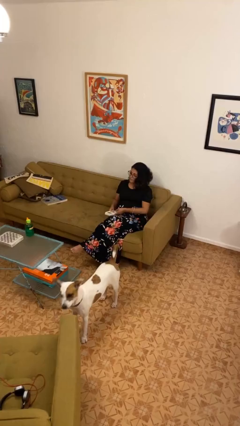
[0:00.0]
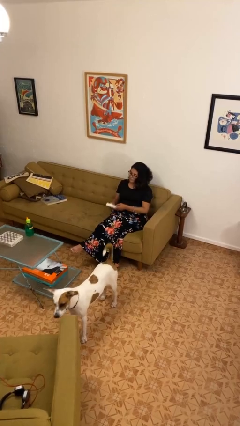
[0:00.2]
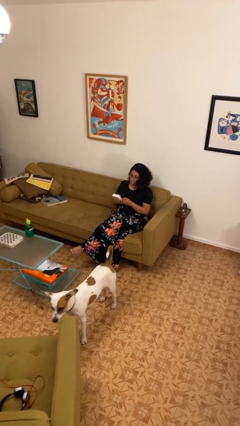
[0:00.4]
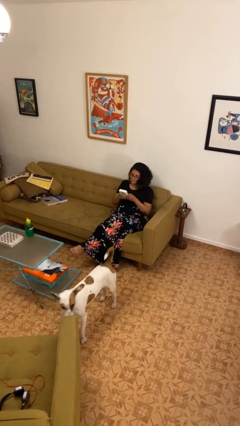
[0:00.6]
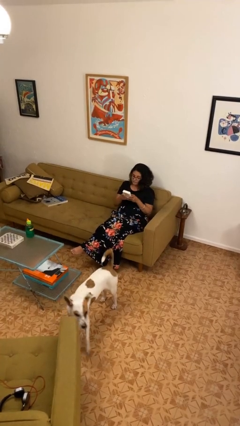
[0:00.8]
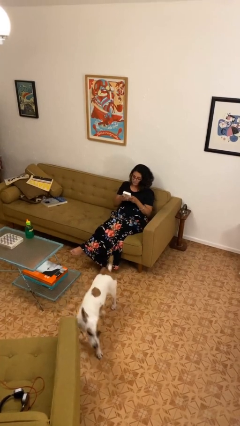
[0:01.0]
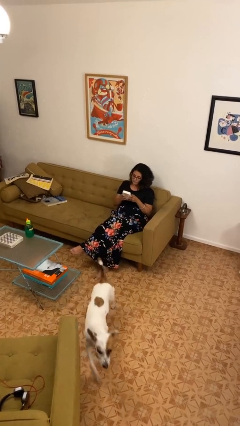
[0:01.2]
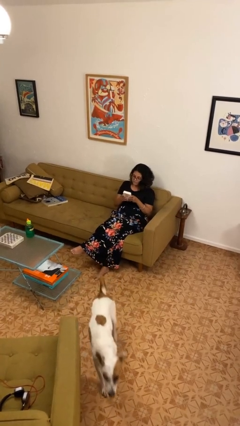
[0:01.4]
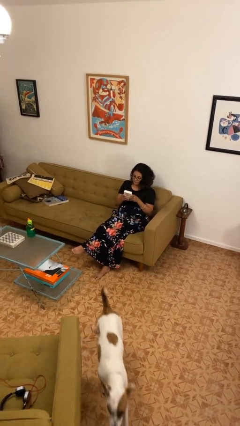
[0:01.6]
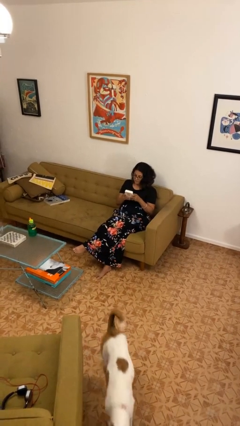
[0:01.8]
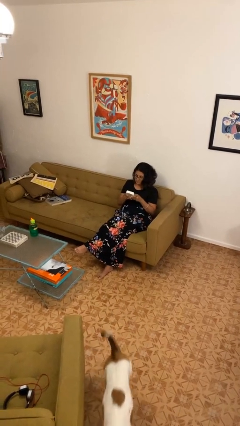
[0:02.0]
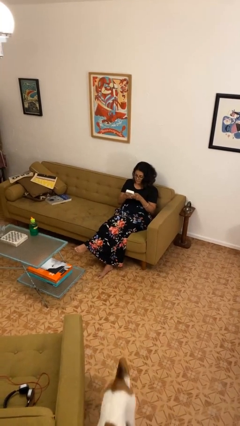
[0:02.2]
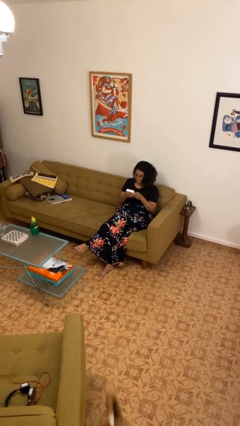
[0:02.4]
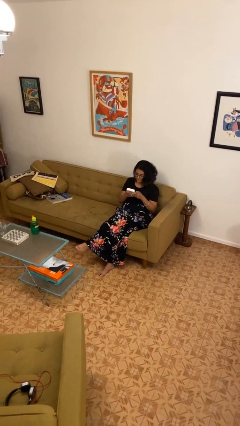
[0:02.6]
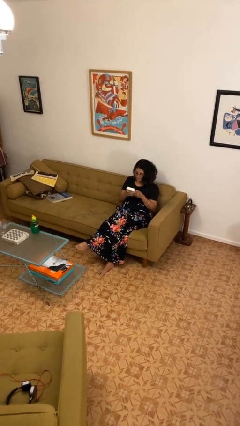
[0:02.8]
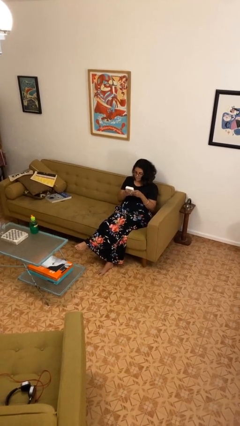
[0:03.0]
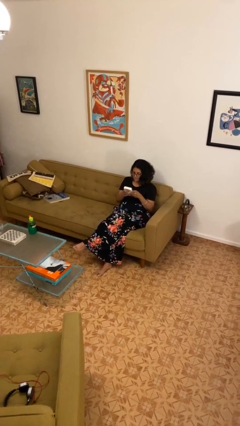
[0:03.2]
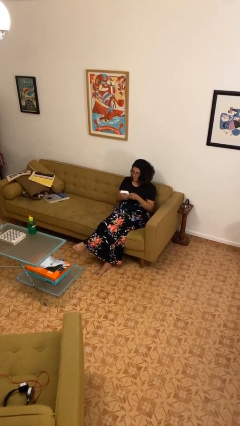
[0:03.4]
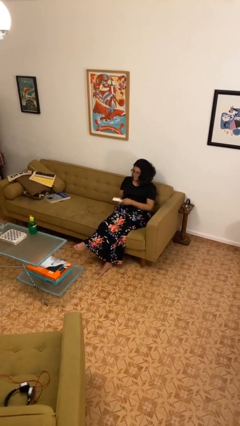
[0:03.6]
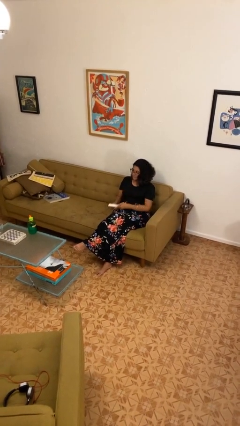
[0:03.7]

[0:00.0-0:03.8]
person interacts with handheld game

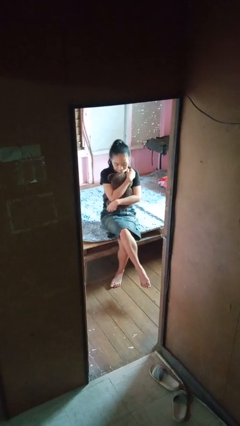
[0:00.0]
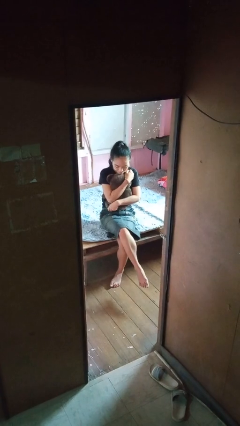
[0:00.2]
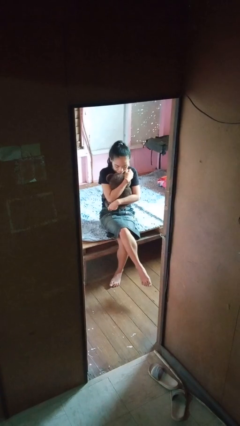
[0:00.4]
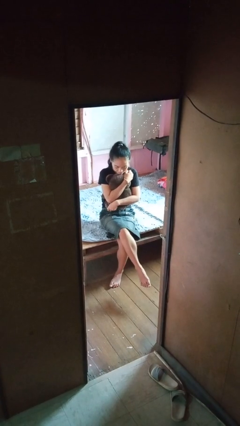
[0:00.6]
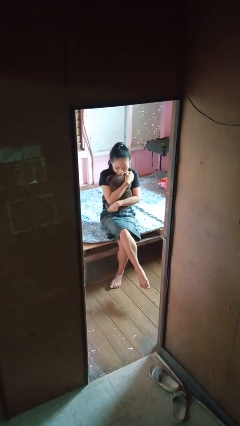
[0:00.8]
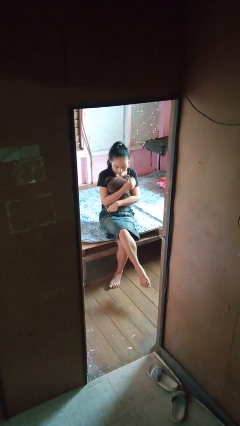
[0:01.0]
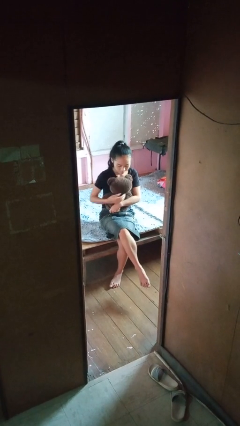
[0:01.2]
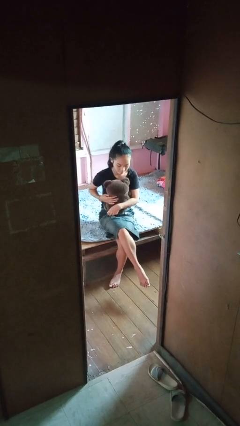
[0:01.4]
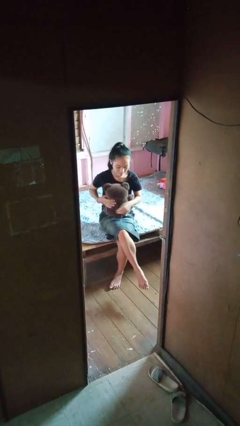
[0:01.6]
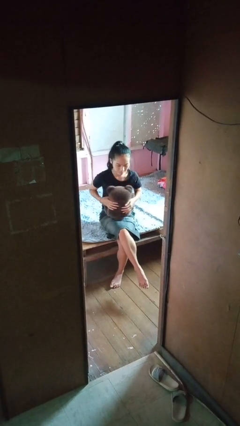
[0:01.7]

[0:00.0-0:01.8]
person hugs stuffed animal

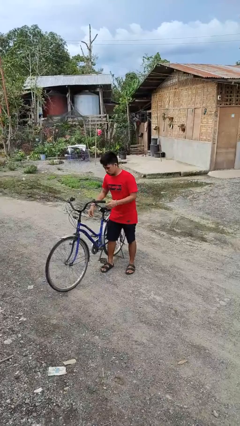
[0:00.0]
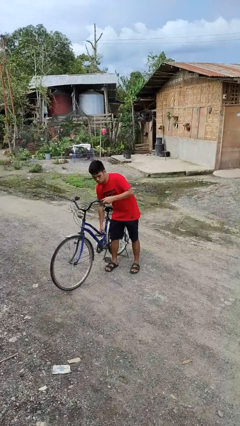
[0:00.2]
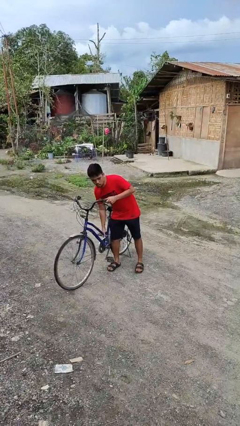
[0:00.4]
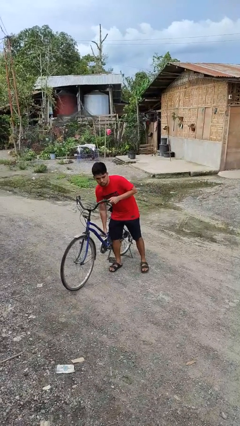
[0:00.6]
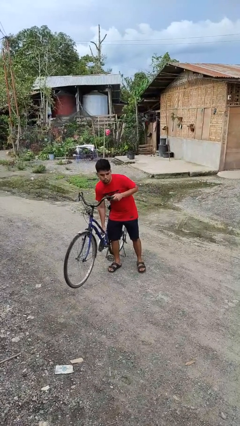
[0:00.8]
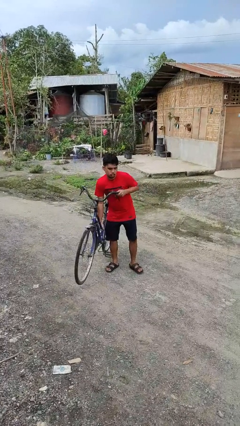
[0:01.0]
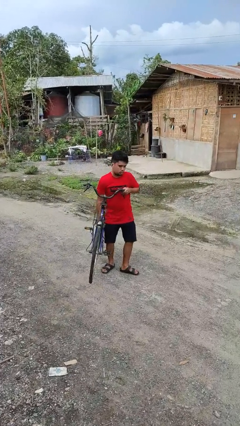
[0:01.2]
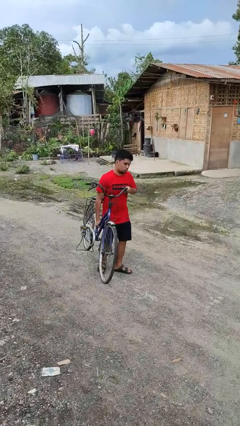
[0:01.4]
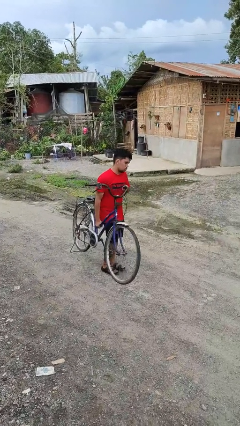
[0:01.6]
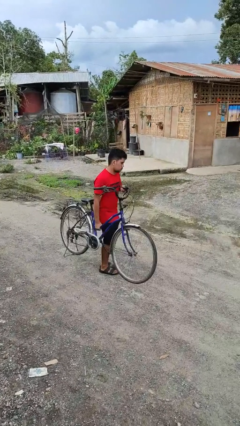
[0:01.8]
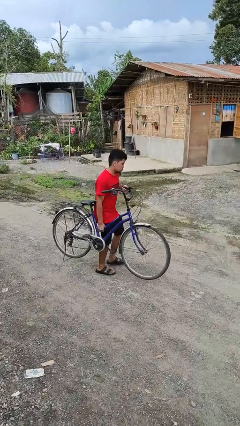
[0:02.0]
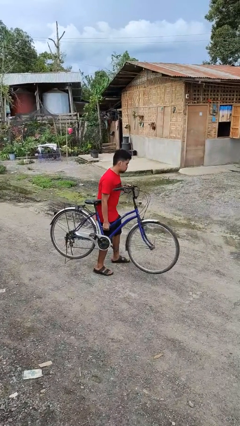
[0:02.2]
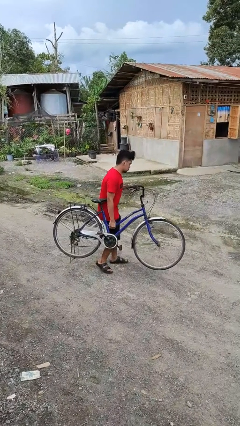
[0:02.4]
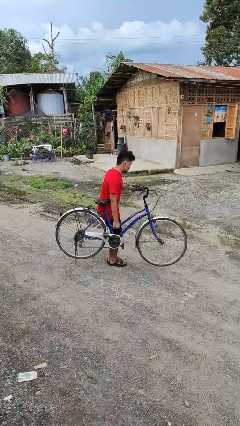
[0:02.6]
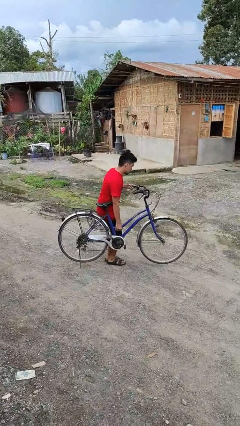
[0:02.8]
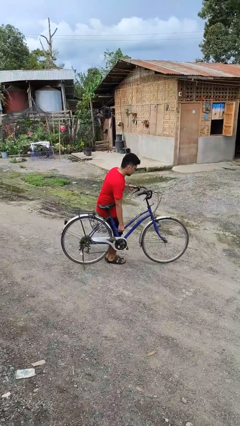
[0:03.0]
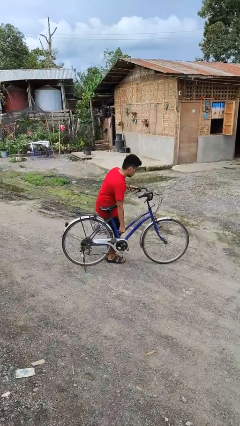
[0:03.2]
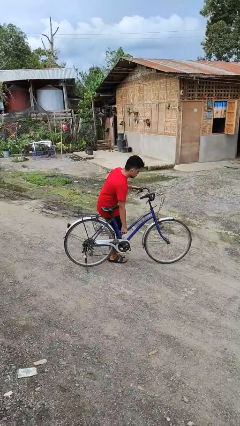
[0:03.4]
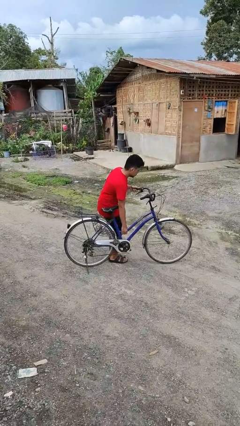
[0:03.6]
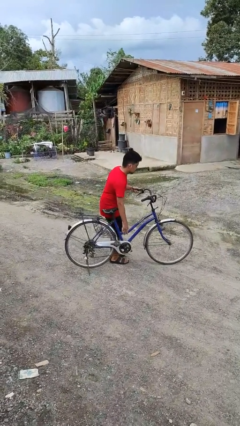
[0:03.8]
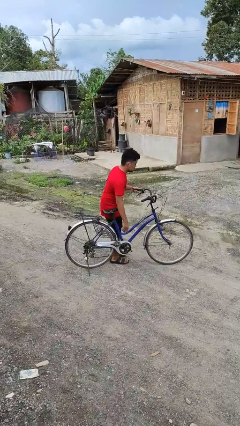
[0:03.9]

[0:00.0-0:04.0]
person carries bicycle

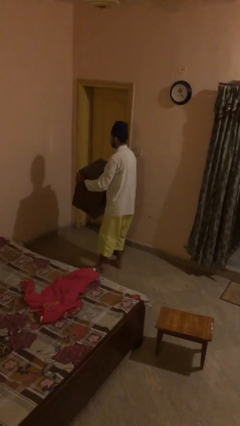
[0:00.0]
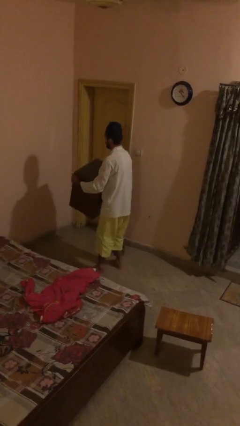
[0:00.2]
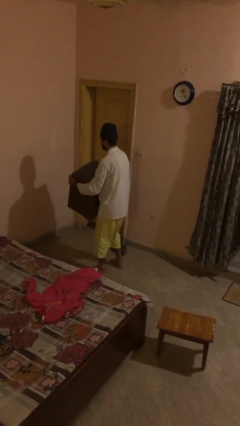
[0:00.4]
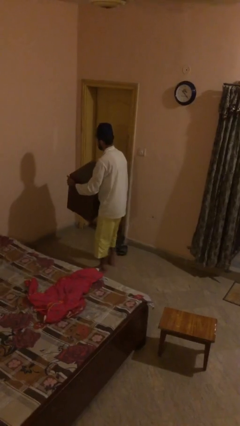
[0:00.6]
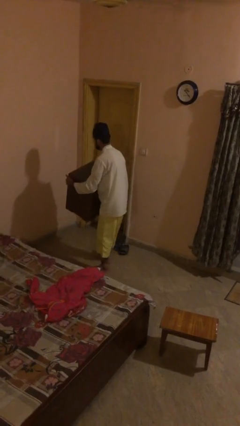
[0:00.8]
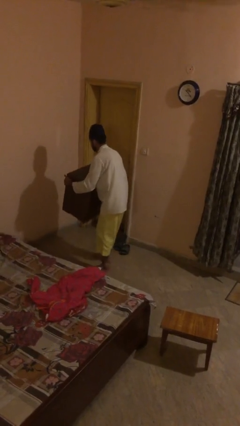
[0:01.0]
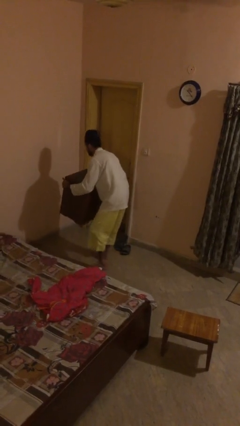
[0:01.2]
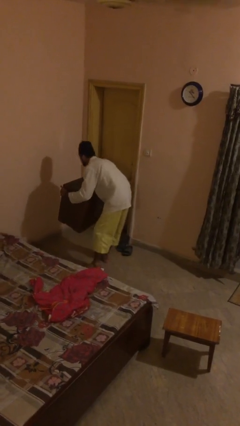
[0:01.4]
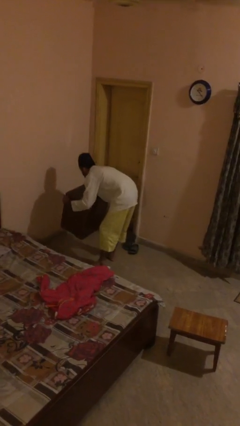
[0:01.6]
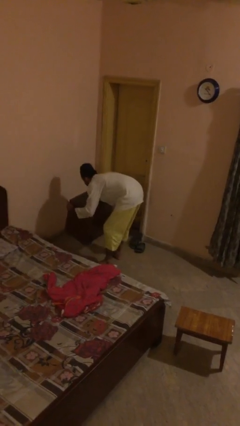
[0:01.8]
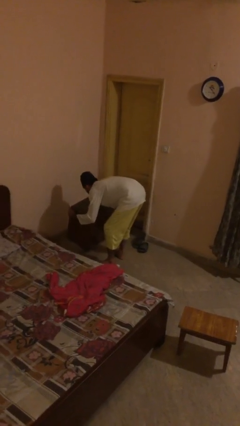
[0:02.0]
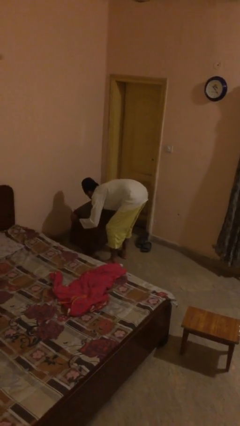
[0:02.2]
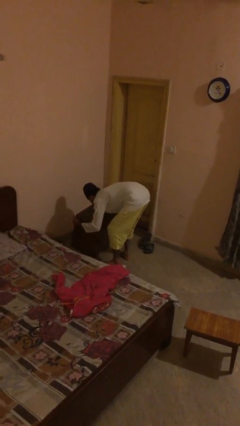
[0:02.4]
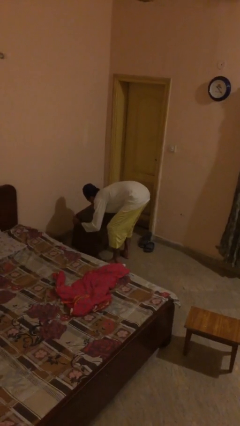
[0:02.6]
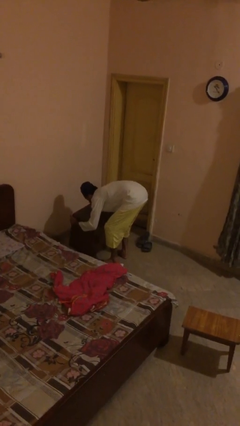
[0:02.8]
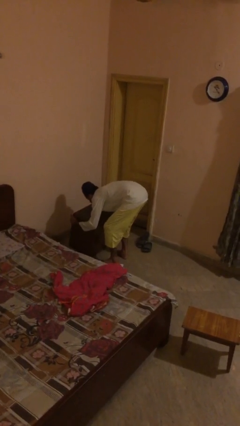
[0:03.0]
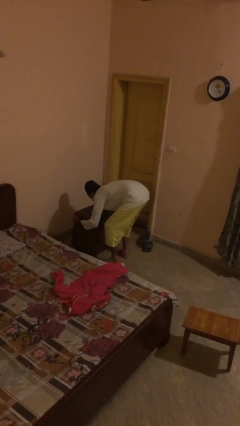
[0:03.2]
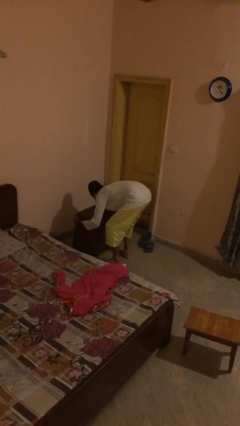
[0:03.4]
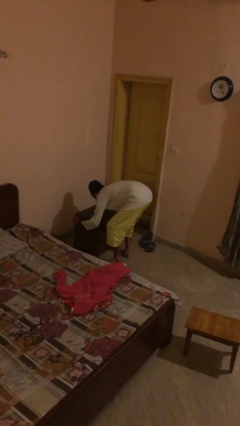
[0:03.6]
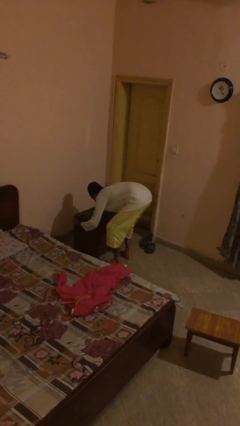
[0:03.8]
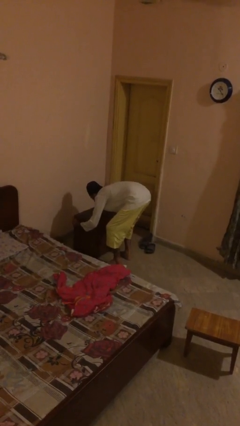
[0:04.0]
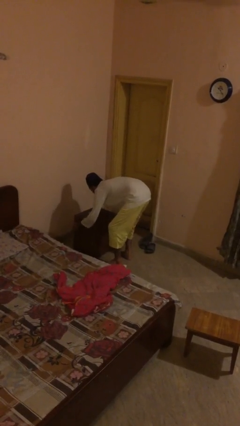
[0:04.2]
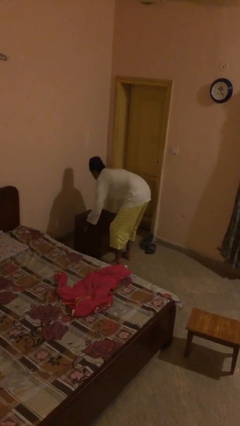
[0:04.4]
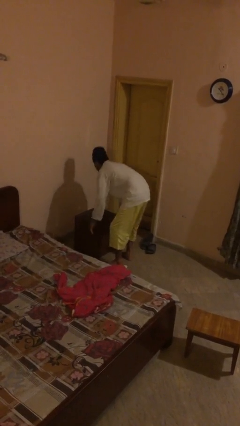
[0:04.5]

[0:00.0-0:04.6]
person puts down object on floor

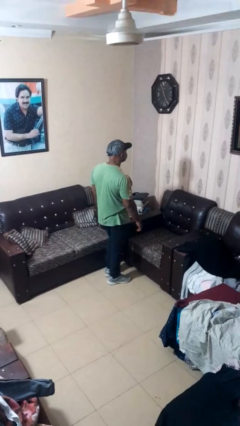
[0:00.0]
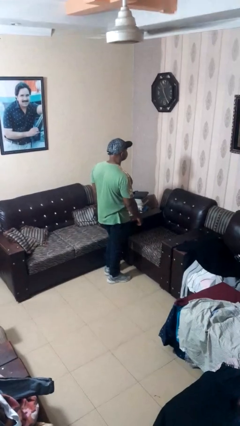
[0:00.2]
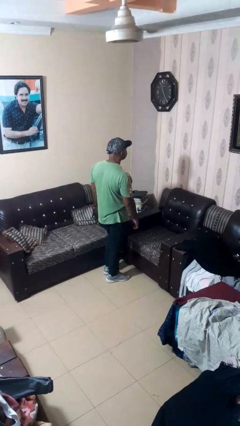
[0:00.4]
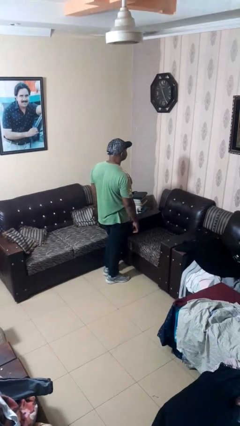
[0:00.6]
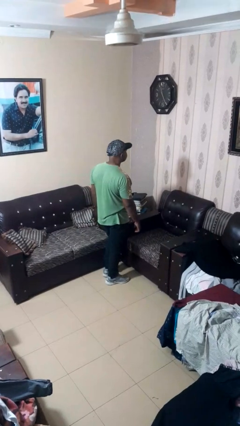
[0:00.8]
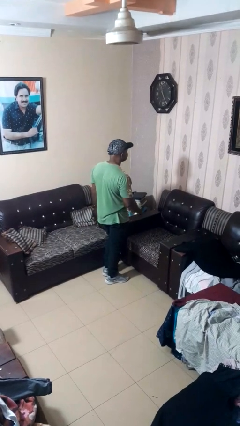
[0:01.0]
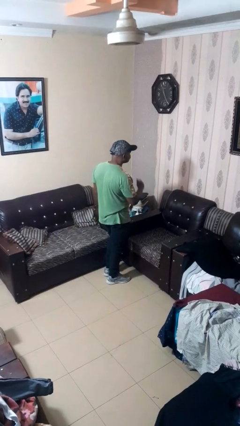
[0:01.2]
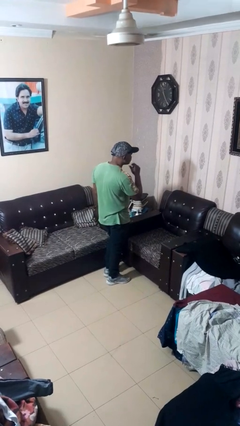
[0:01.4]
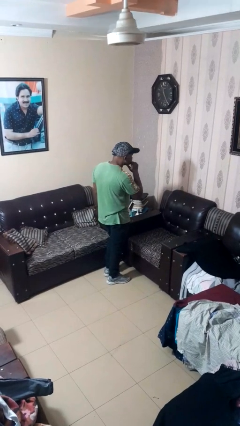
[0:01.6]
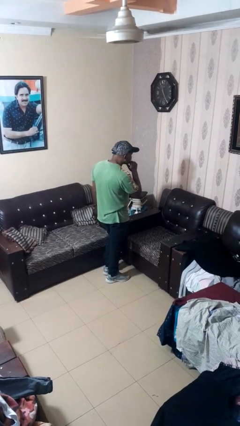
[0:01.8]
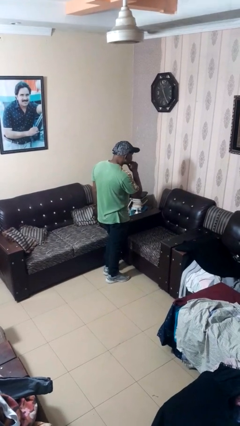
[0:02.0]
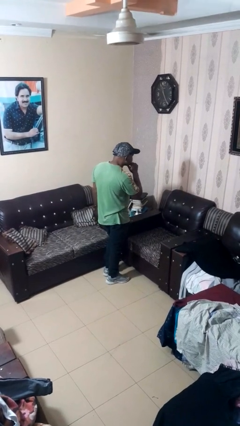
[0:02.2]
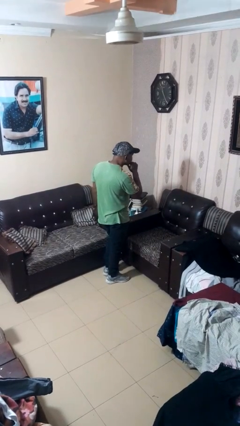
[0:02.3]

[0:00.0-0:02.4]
person strokes chin

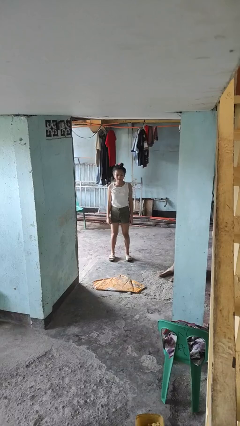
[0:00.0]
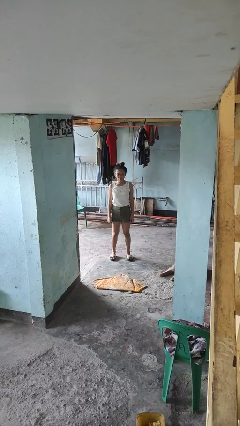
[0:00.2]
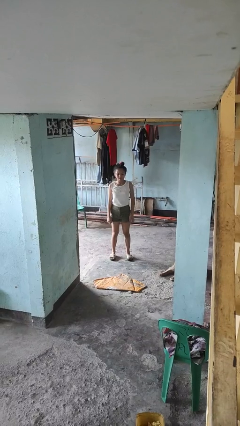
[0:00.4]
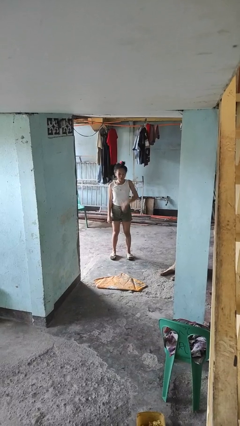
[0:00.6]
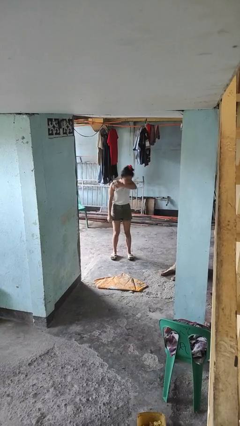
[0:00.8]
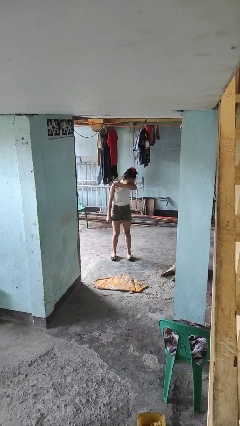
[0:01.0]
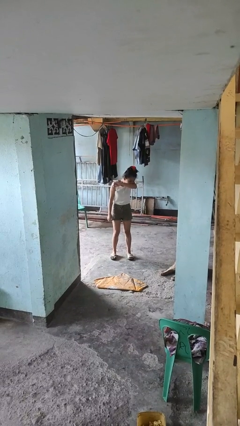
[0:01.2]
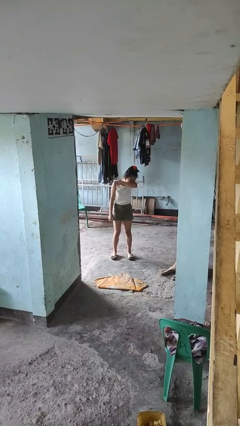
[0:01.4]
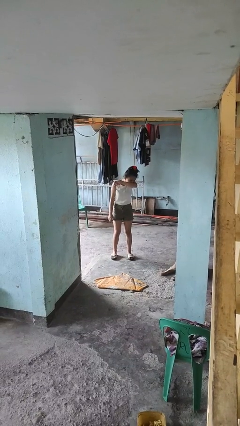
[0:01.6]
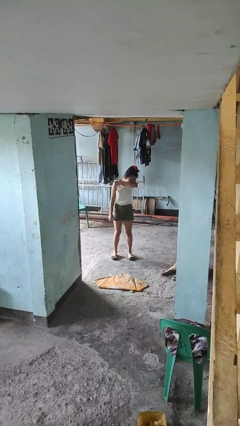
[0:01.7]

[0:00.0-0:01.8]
person sneezes into arm
